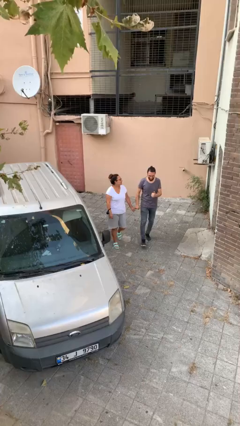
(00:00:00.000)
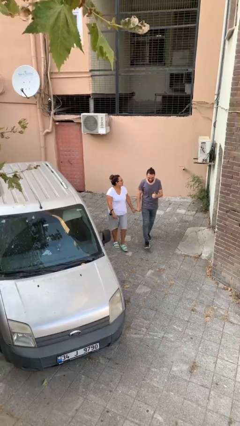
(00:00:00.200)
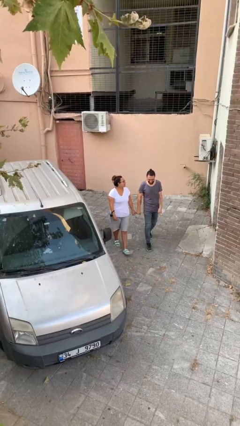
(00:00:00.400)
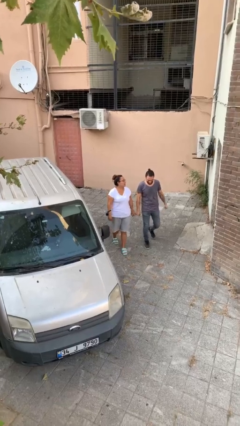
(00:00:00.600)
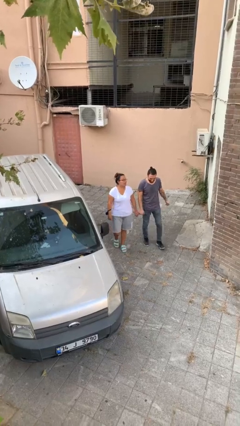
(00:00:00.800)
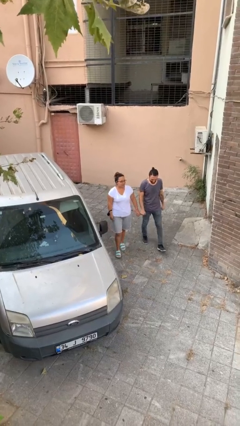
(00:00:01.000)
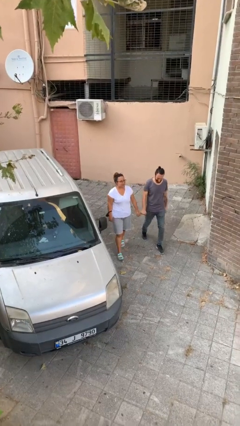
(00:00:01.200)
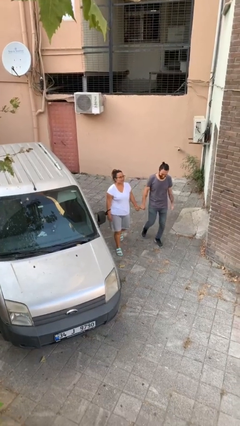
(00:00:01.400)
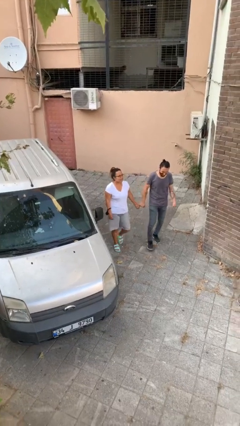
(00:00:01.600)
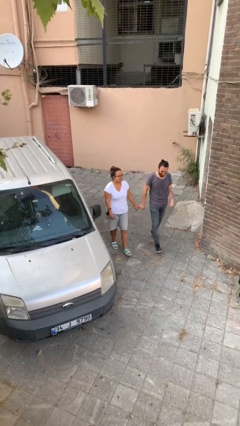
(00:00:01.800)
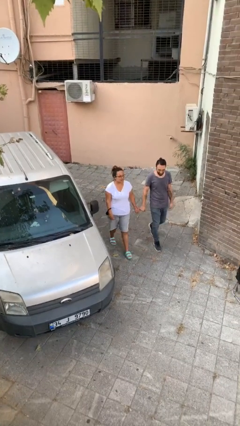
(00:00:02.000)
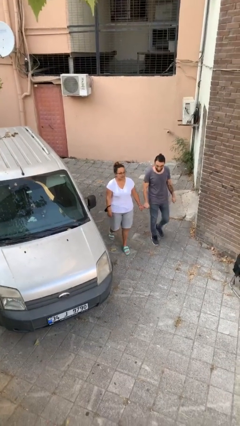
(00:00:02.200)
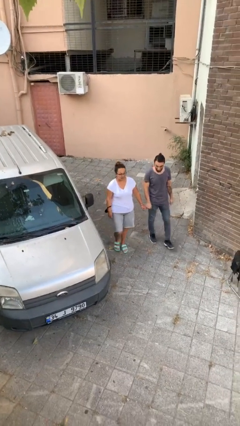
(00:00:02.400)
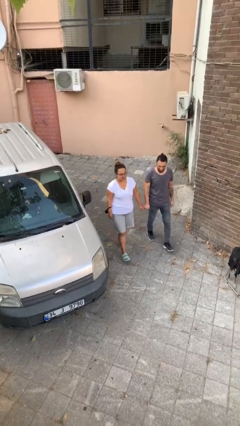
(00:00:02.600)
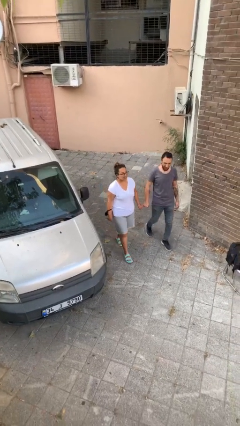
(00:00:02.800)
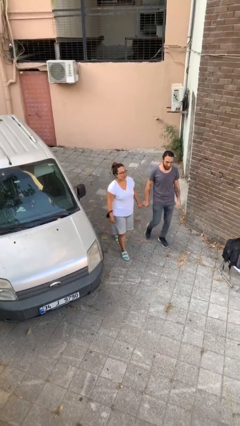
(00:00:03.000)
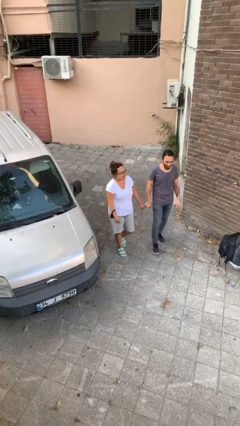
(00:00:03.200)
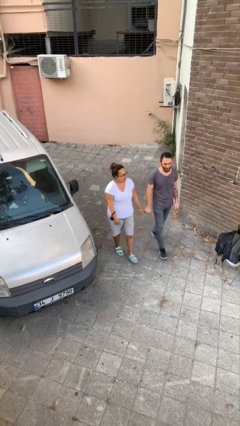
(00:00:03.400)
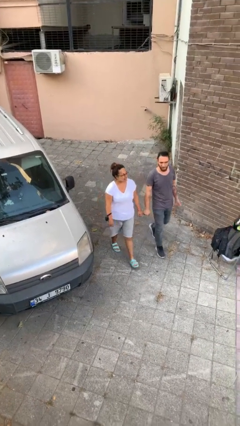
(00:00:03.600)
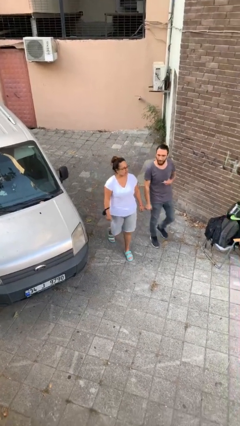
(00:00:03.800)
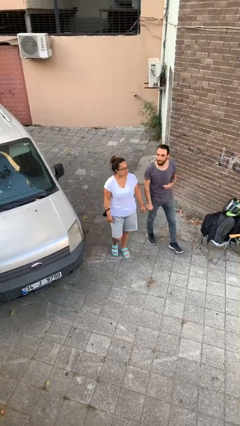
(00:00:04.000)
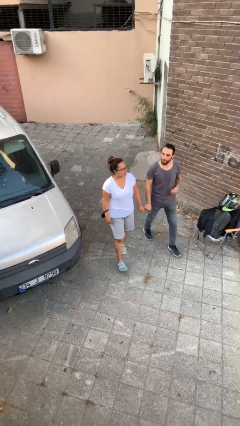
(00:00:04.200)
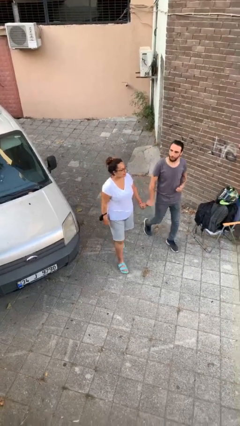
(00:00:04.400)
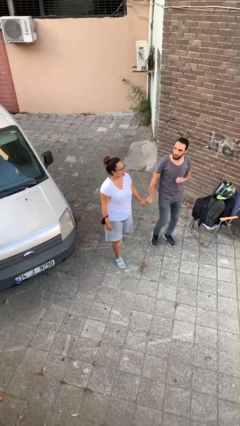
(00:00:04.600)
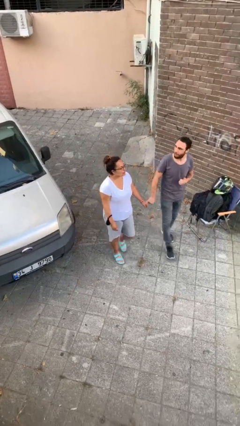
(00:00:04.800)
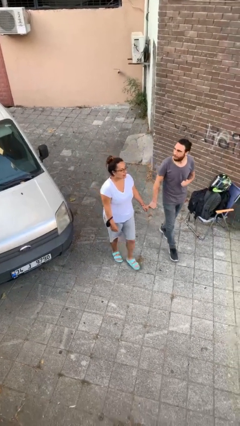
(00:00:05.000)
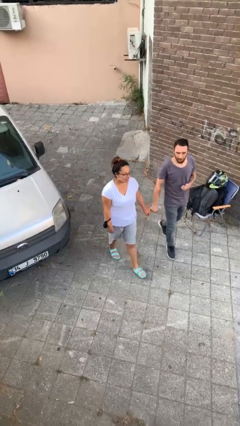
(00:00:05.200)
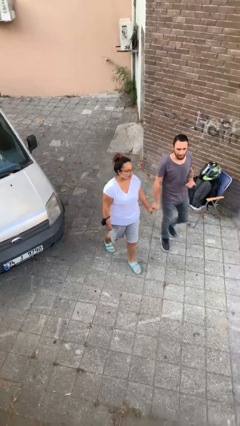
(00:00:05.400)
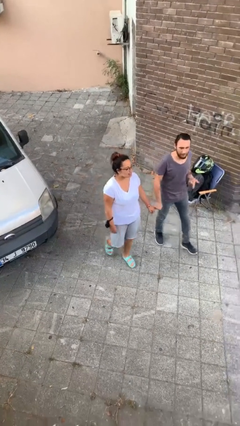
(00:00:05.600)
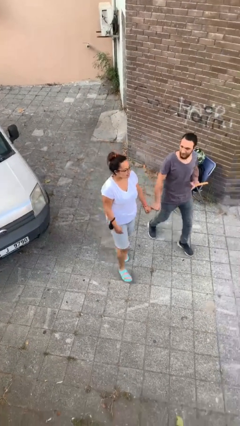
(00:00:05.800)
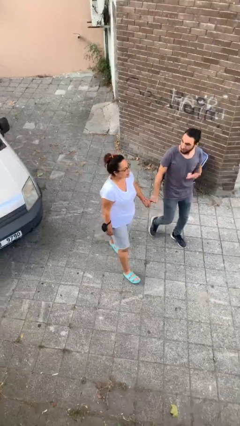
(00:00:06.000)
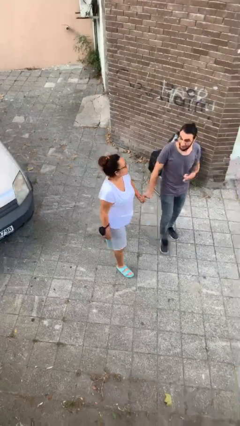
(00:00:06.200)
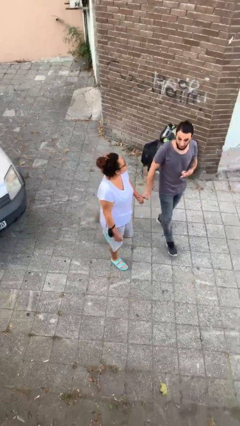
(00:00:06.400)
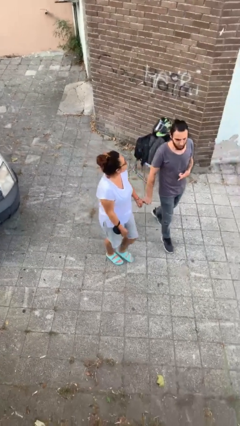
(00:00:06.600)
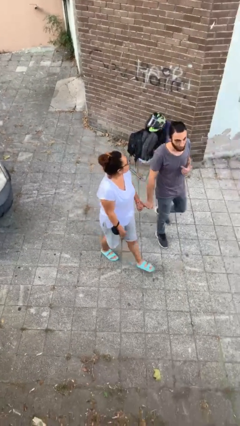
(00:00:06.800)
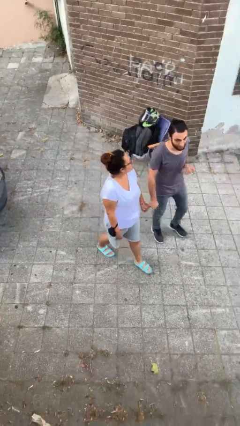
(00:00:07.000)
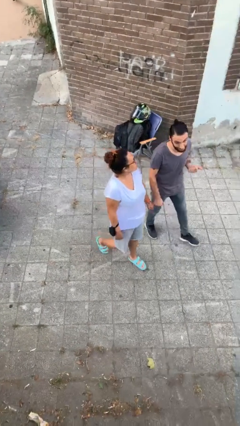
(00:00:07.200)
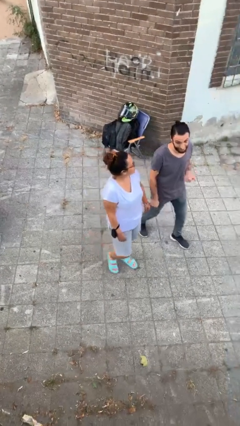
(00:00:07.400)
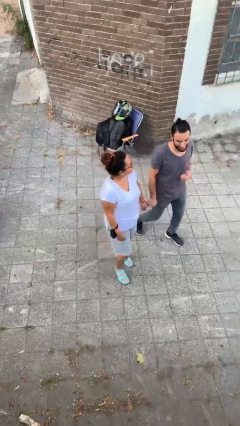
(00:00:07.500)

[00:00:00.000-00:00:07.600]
person holds hand

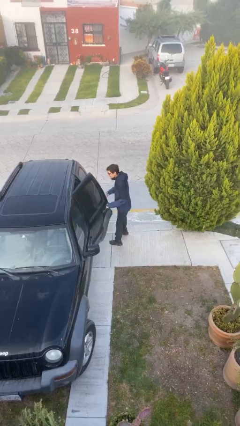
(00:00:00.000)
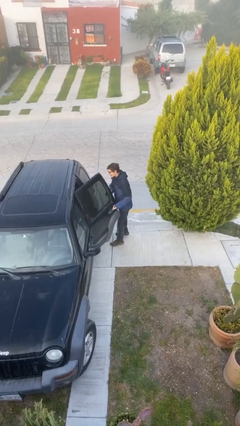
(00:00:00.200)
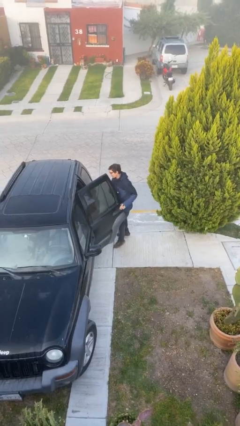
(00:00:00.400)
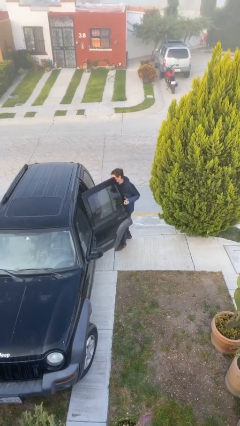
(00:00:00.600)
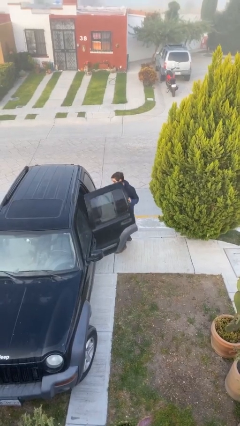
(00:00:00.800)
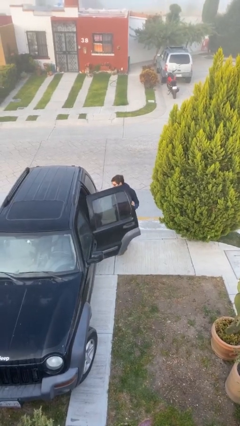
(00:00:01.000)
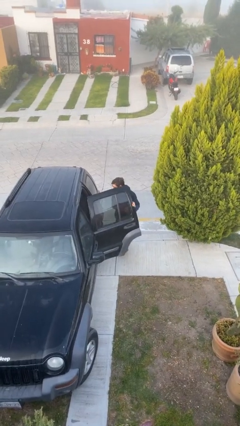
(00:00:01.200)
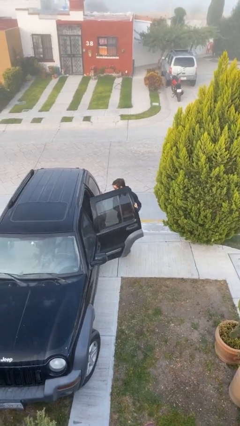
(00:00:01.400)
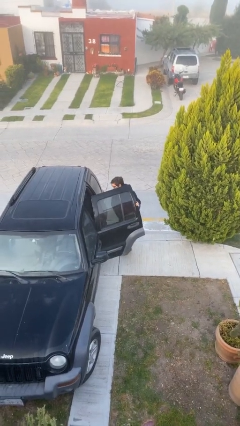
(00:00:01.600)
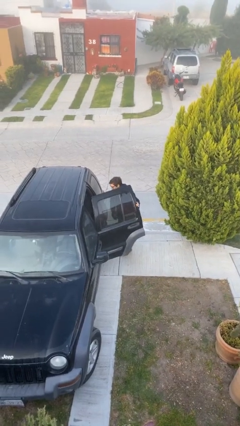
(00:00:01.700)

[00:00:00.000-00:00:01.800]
person opens car door

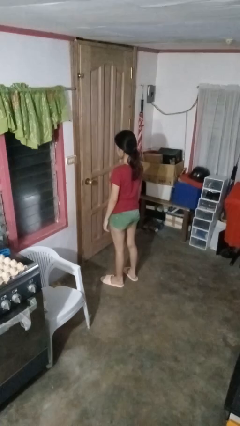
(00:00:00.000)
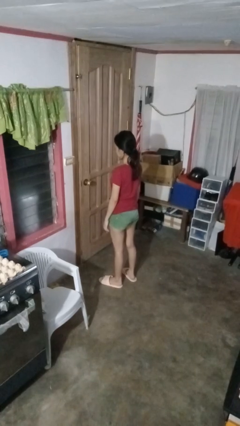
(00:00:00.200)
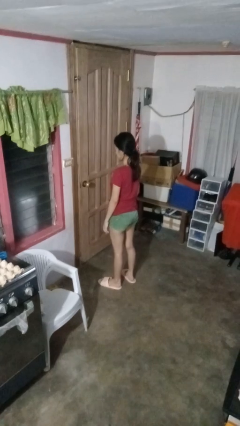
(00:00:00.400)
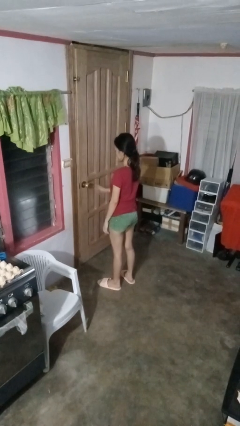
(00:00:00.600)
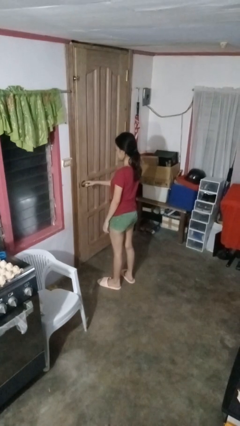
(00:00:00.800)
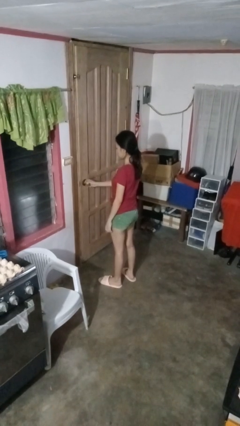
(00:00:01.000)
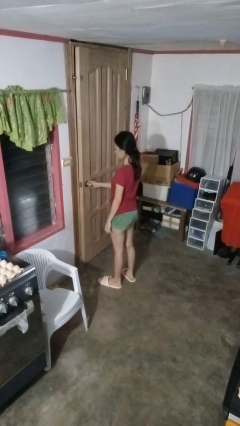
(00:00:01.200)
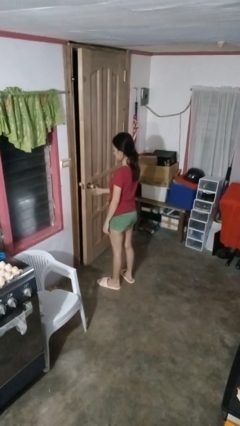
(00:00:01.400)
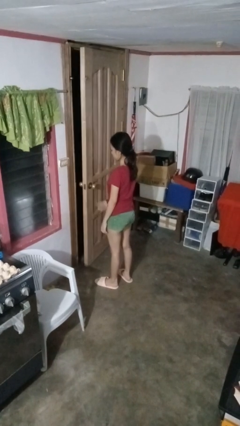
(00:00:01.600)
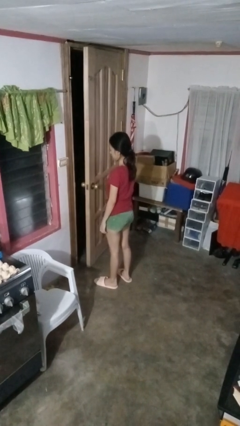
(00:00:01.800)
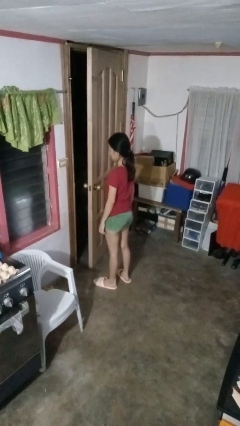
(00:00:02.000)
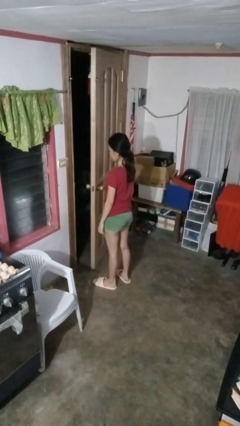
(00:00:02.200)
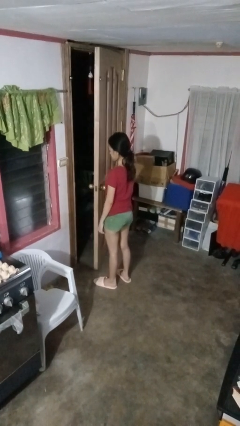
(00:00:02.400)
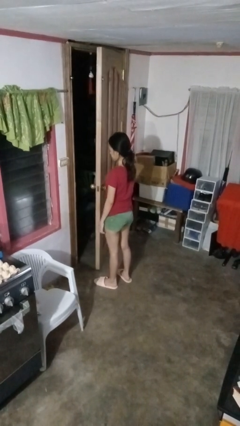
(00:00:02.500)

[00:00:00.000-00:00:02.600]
person opens facility door

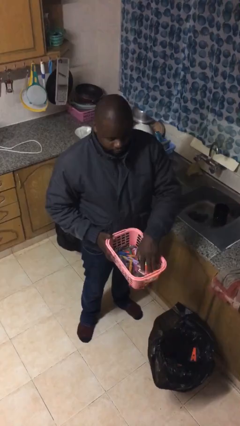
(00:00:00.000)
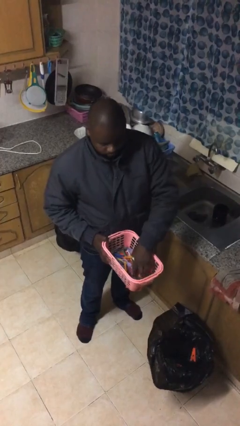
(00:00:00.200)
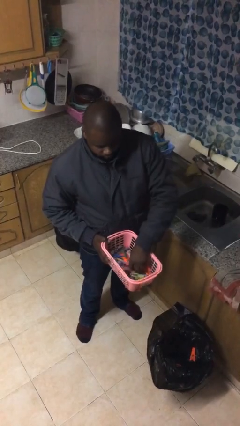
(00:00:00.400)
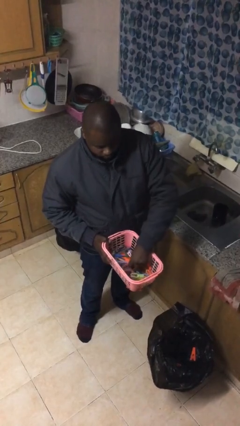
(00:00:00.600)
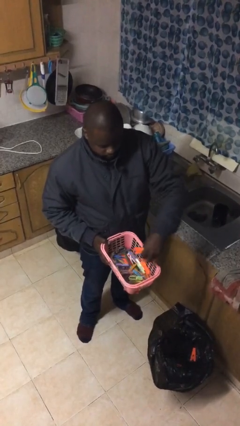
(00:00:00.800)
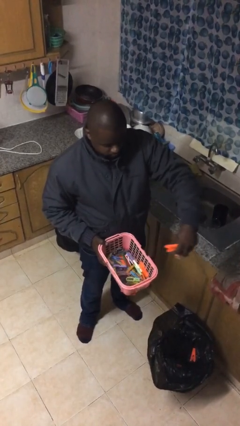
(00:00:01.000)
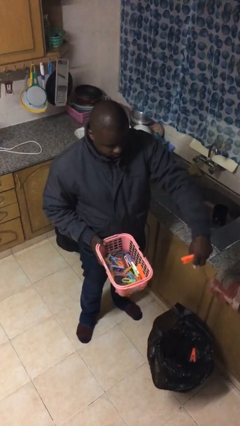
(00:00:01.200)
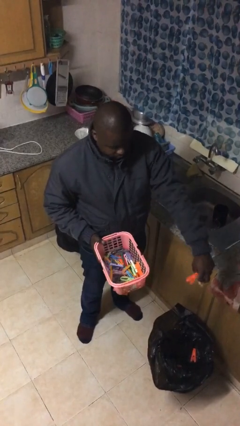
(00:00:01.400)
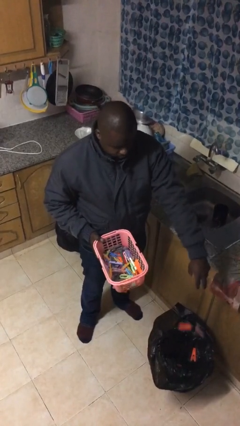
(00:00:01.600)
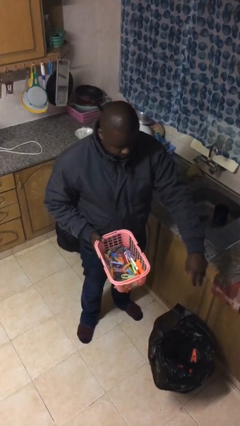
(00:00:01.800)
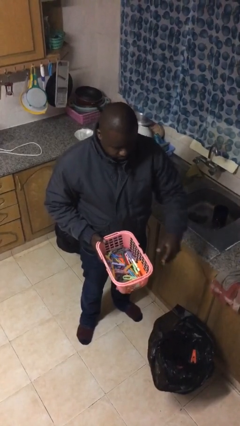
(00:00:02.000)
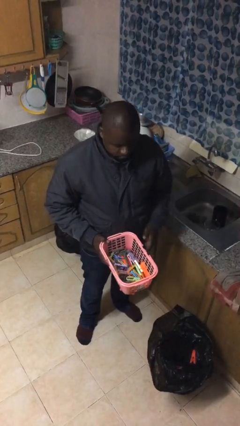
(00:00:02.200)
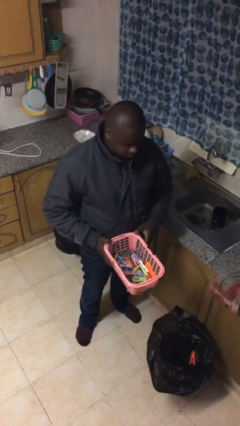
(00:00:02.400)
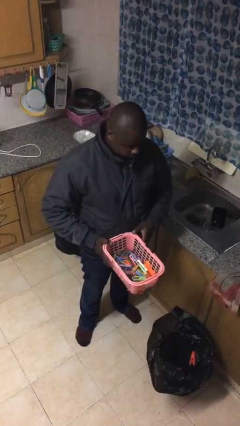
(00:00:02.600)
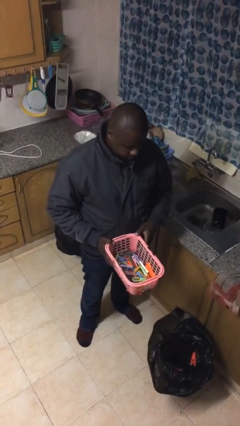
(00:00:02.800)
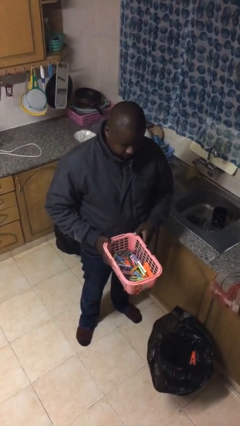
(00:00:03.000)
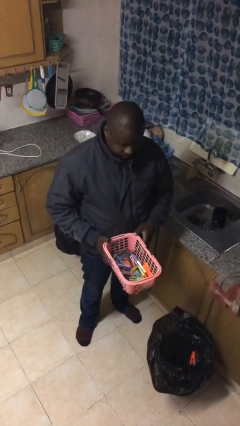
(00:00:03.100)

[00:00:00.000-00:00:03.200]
person discards trash

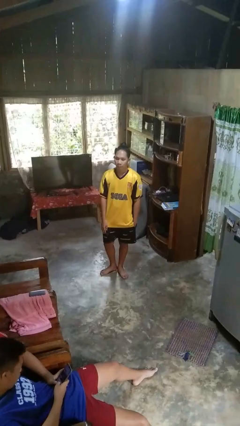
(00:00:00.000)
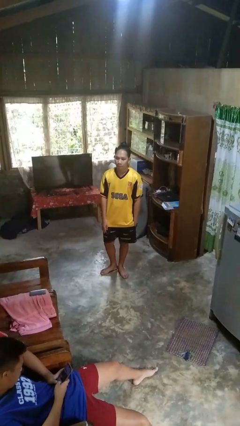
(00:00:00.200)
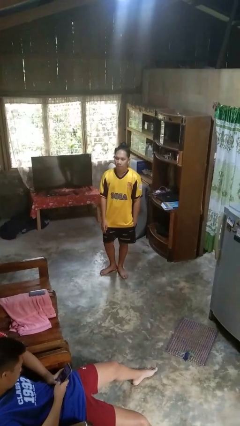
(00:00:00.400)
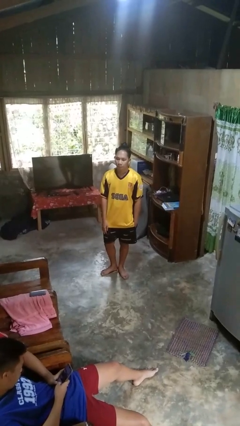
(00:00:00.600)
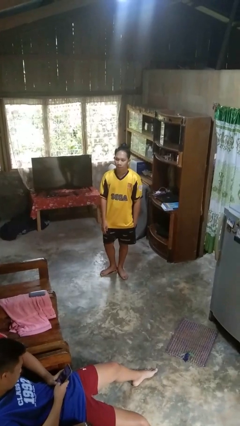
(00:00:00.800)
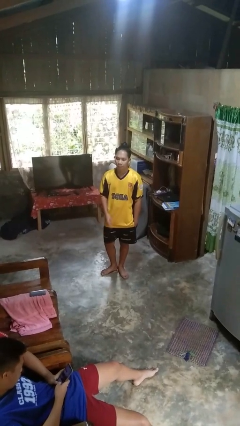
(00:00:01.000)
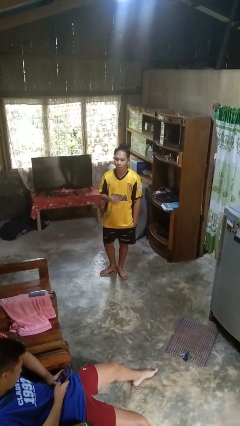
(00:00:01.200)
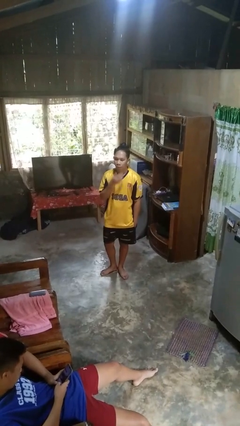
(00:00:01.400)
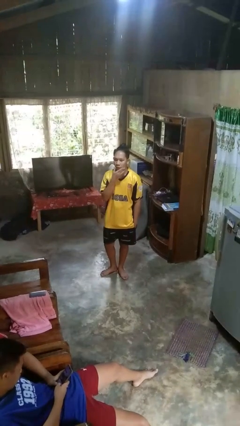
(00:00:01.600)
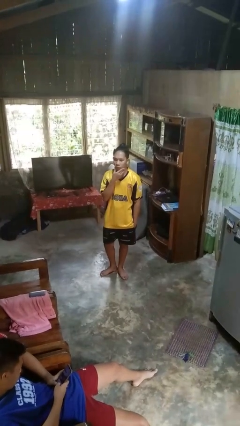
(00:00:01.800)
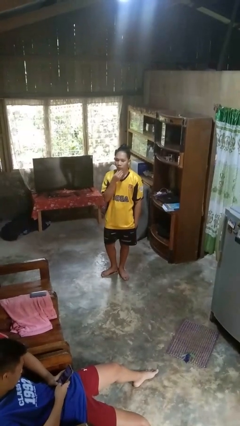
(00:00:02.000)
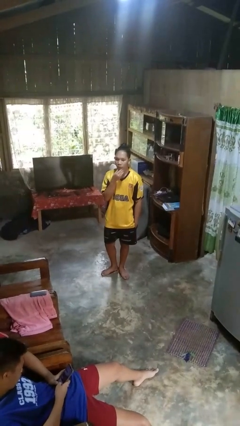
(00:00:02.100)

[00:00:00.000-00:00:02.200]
person strokes chin
